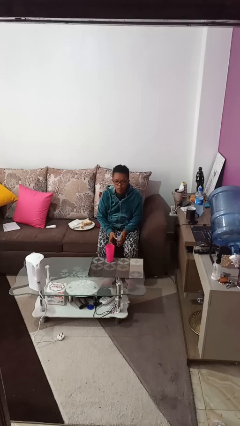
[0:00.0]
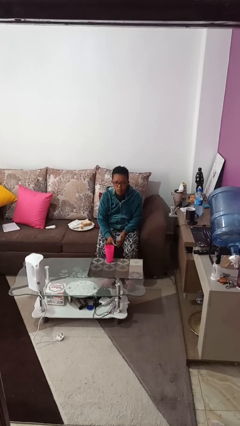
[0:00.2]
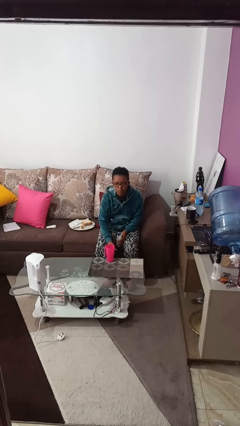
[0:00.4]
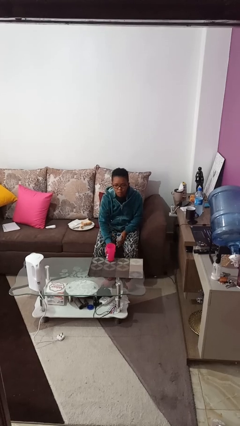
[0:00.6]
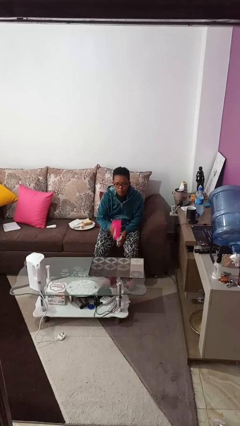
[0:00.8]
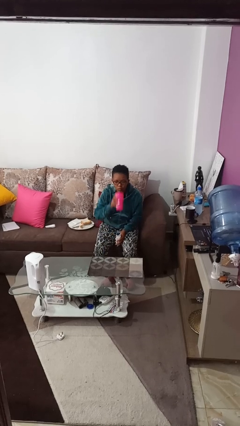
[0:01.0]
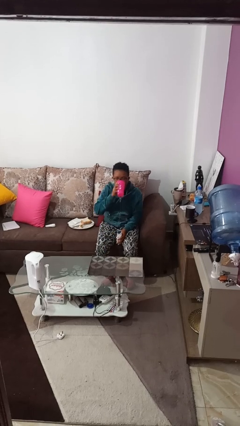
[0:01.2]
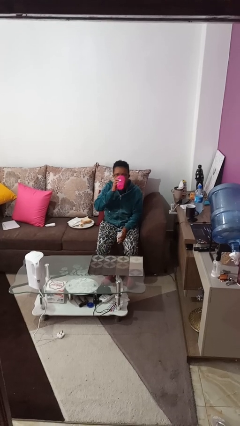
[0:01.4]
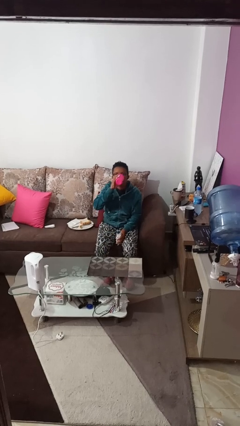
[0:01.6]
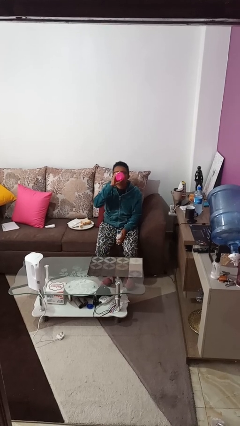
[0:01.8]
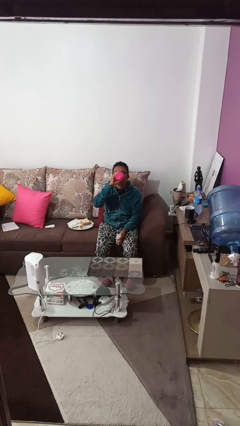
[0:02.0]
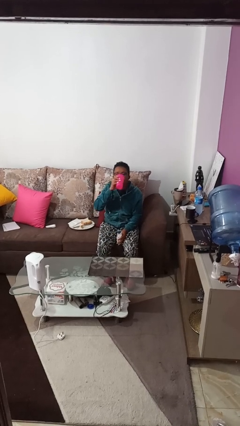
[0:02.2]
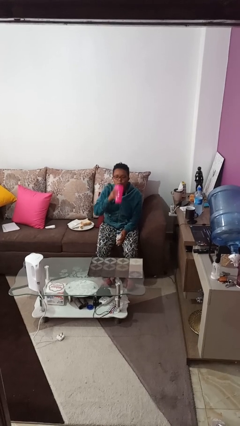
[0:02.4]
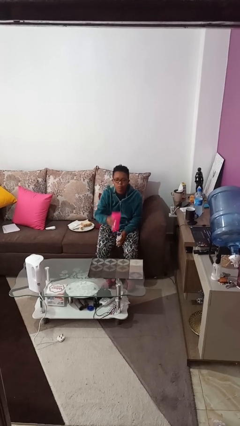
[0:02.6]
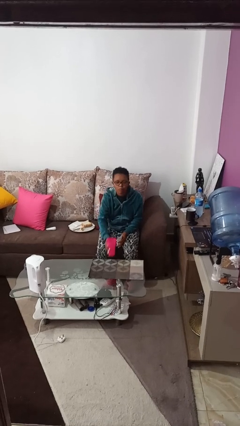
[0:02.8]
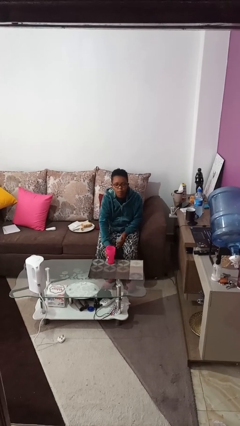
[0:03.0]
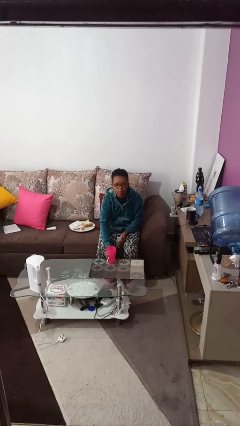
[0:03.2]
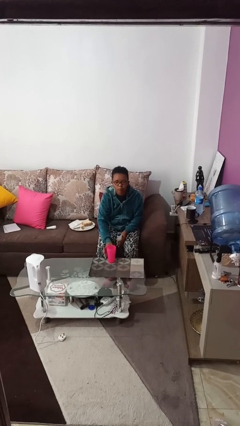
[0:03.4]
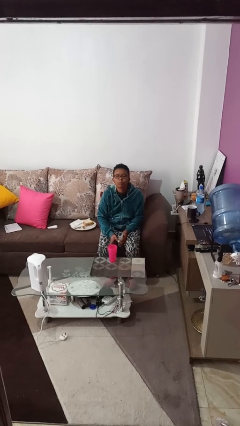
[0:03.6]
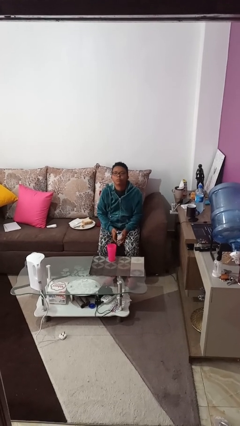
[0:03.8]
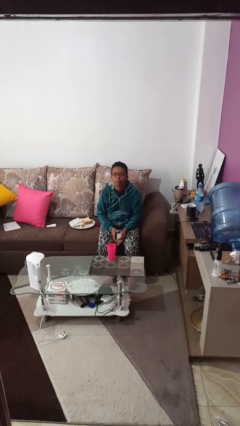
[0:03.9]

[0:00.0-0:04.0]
person drinks from cup

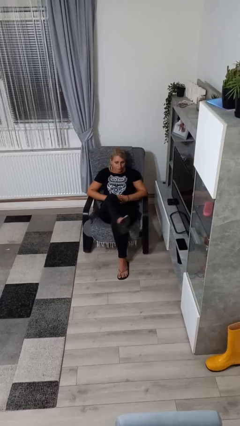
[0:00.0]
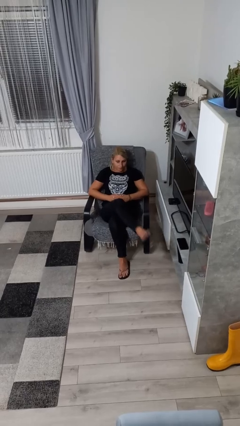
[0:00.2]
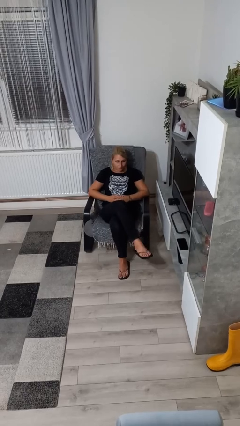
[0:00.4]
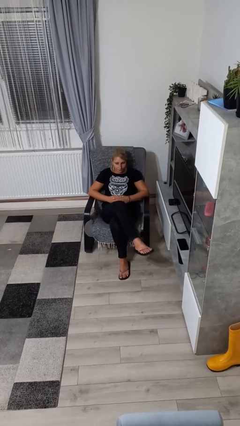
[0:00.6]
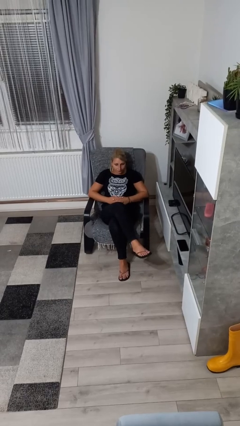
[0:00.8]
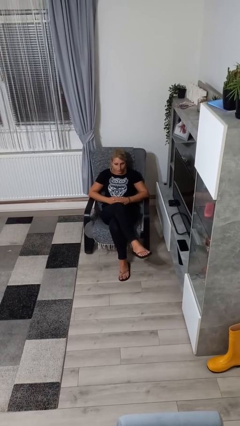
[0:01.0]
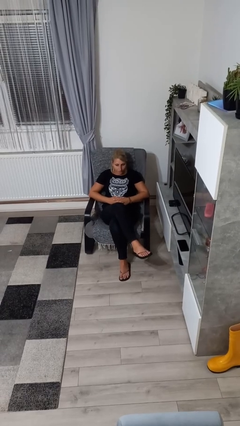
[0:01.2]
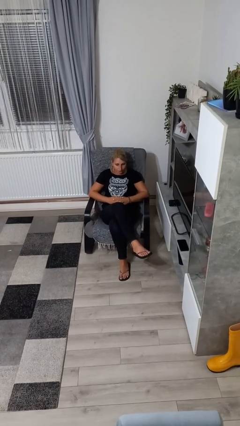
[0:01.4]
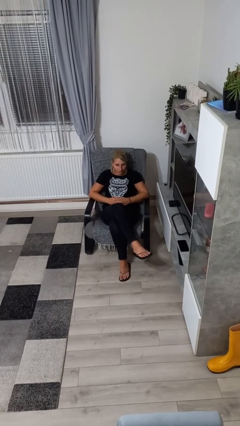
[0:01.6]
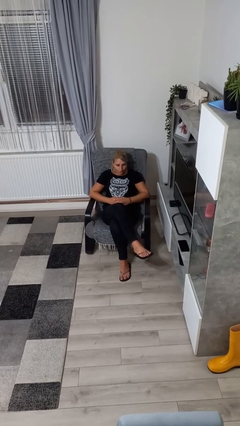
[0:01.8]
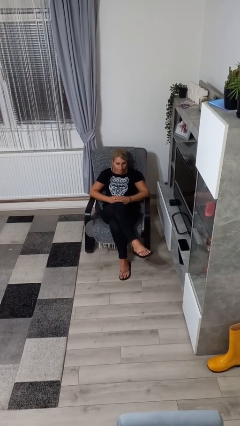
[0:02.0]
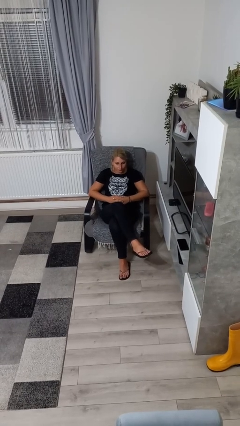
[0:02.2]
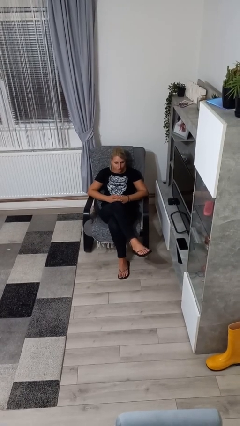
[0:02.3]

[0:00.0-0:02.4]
person crosses legs

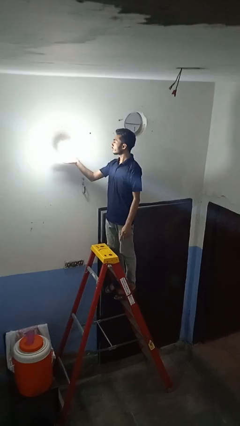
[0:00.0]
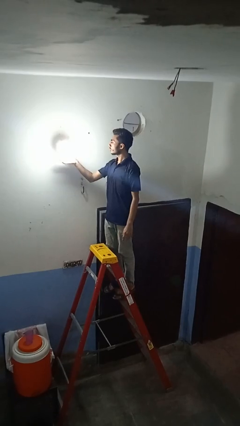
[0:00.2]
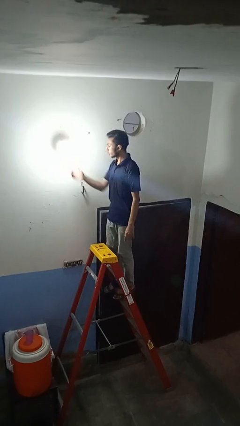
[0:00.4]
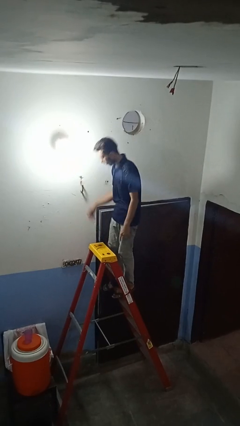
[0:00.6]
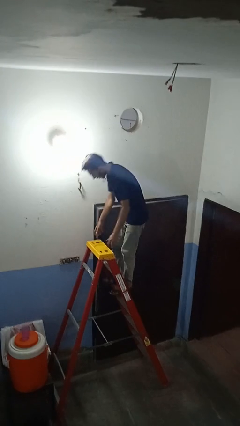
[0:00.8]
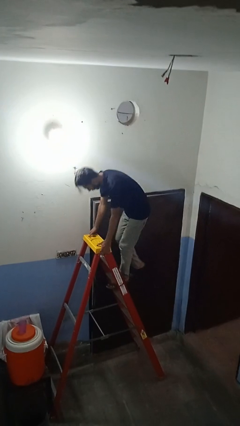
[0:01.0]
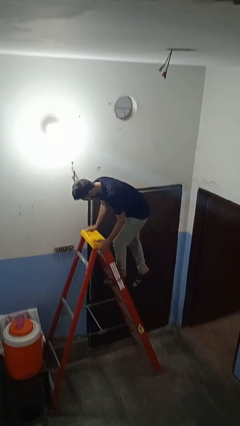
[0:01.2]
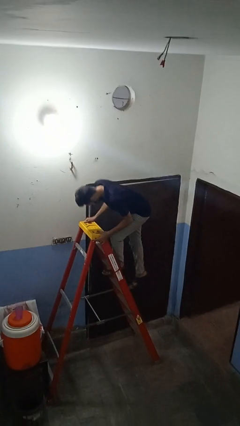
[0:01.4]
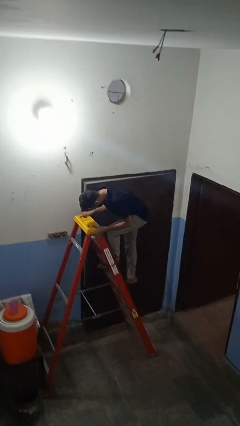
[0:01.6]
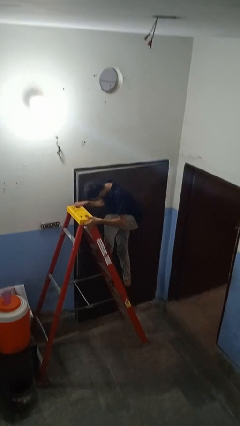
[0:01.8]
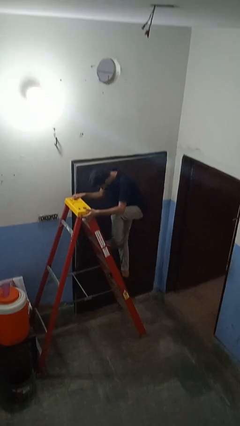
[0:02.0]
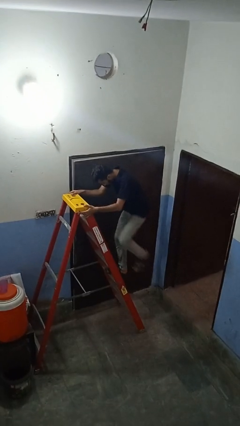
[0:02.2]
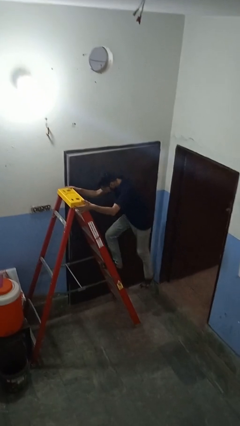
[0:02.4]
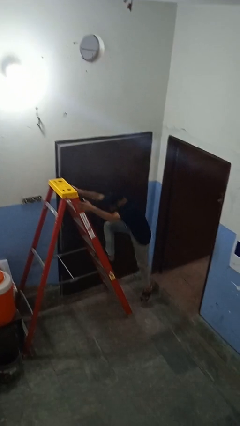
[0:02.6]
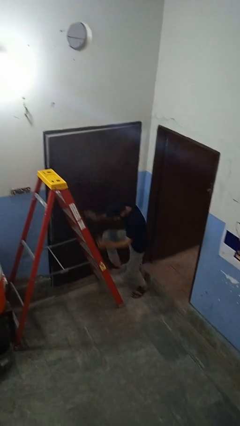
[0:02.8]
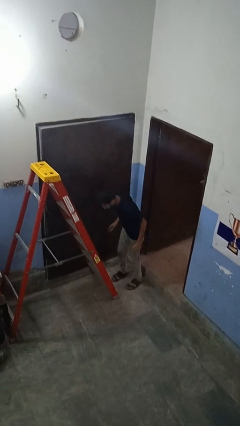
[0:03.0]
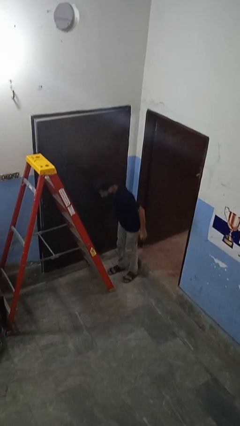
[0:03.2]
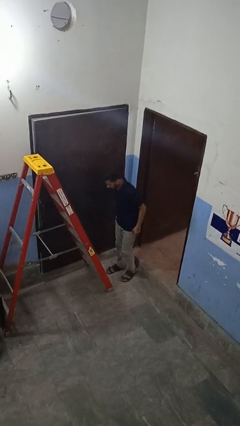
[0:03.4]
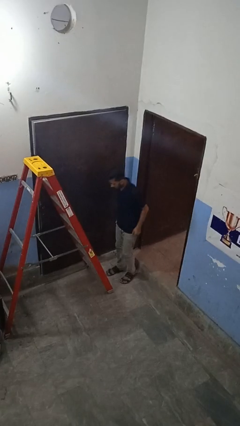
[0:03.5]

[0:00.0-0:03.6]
person climbs down ladder

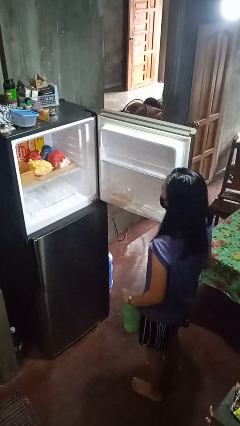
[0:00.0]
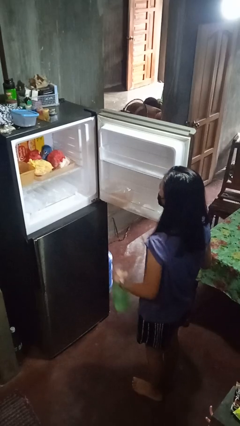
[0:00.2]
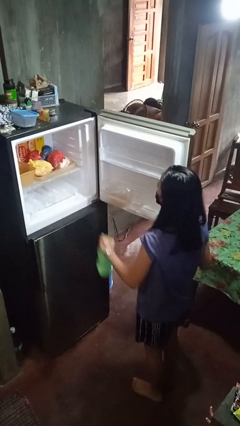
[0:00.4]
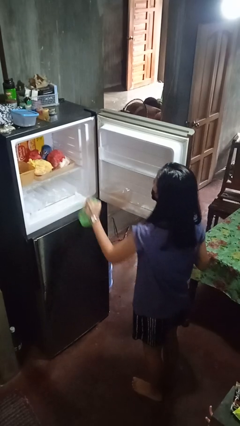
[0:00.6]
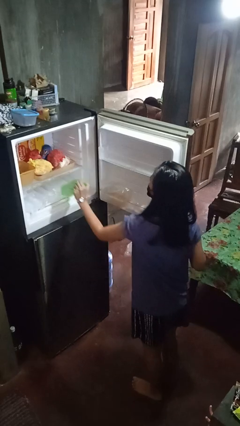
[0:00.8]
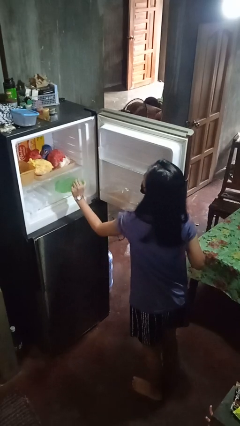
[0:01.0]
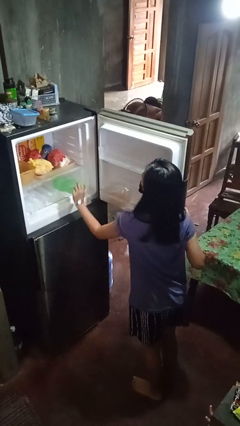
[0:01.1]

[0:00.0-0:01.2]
person puts object into refrigerator

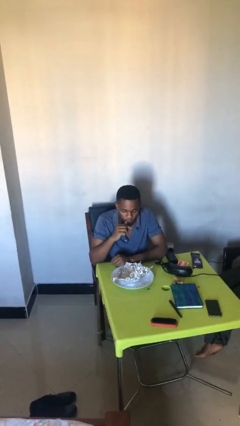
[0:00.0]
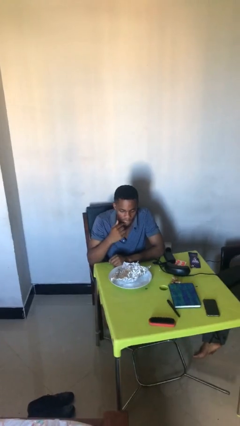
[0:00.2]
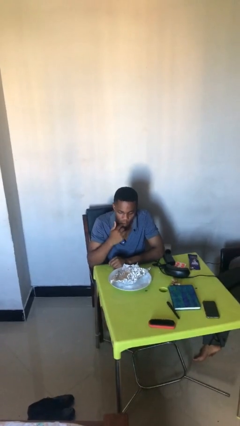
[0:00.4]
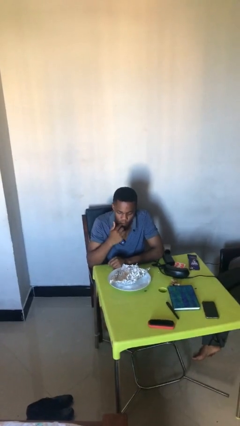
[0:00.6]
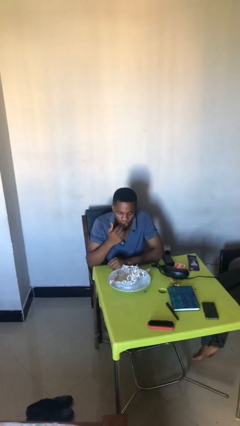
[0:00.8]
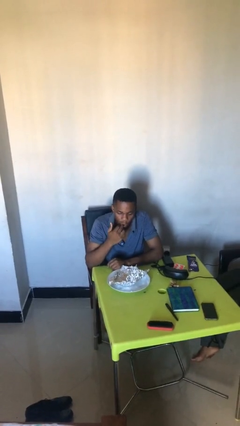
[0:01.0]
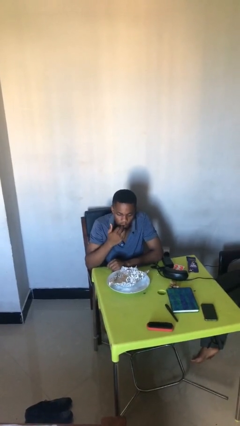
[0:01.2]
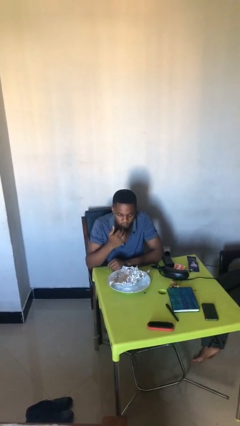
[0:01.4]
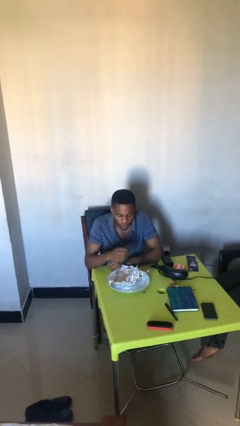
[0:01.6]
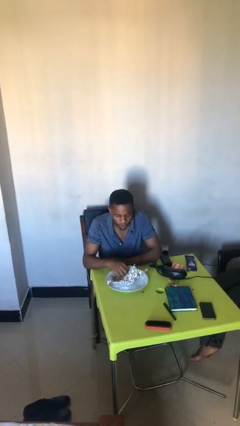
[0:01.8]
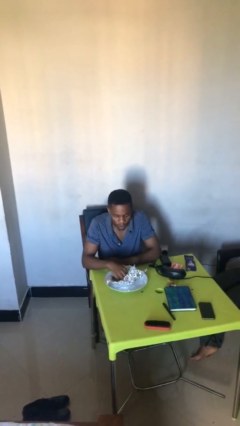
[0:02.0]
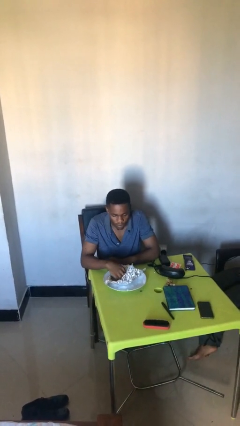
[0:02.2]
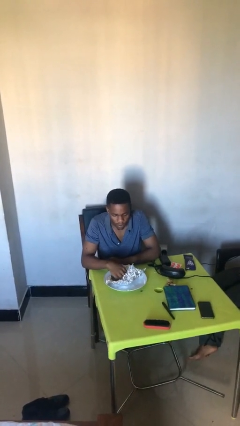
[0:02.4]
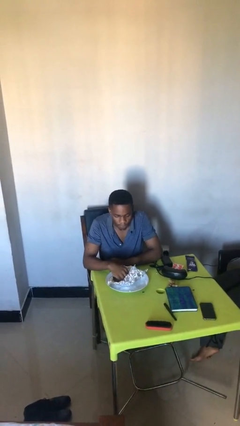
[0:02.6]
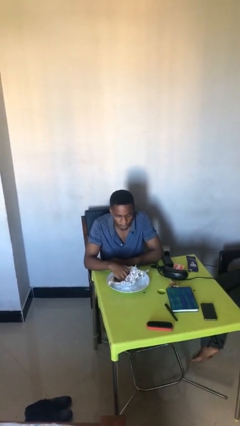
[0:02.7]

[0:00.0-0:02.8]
person licks fingers

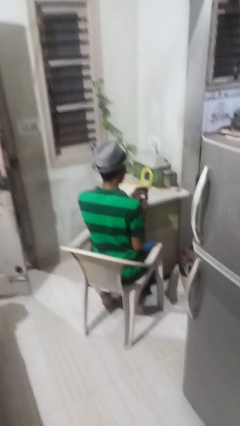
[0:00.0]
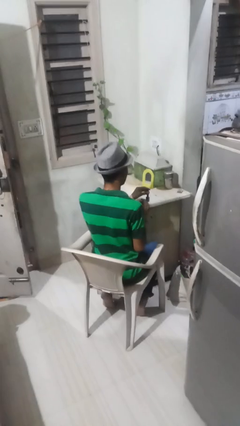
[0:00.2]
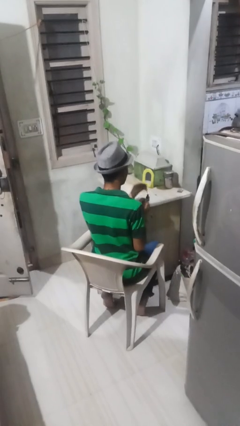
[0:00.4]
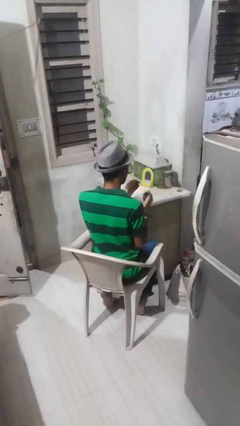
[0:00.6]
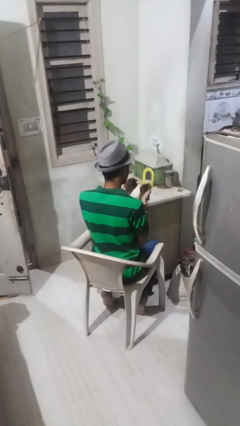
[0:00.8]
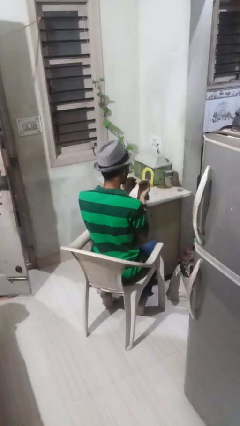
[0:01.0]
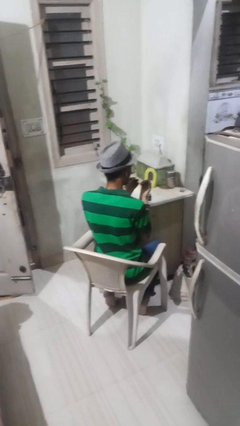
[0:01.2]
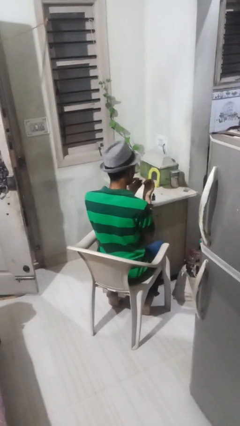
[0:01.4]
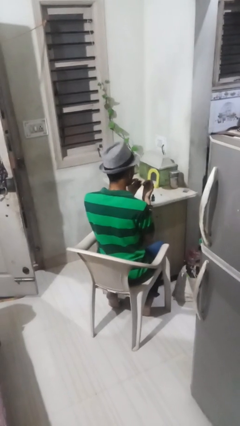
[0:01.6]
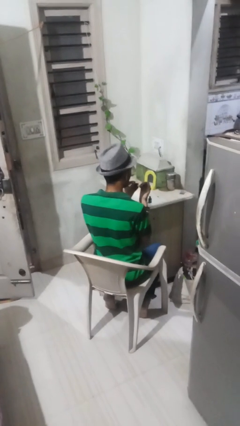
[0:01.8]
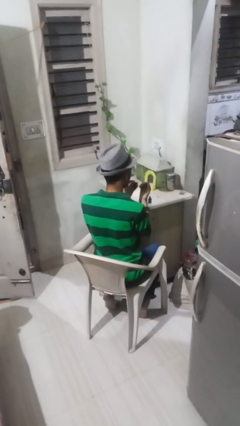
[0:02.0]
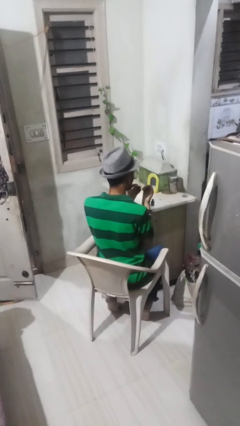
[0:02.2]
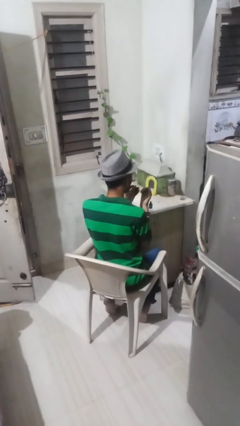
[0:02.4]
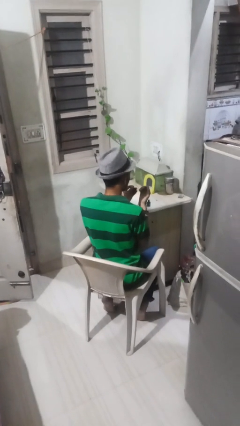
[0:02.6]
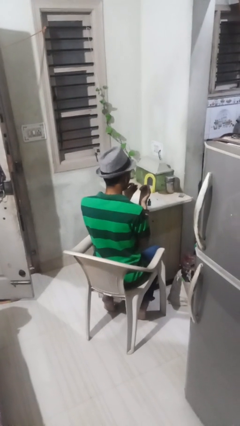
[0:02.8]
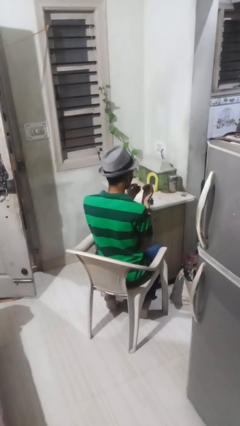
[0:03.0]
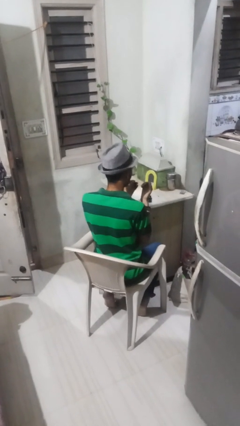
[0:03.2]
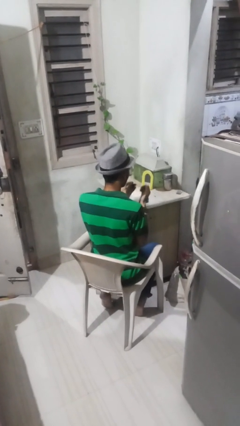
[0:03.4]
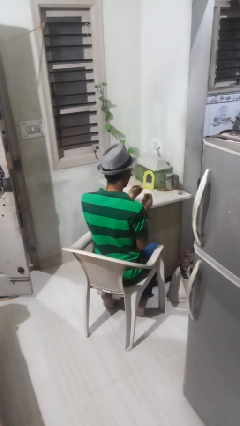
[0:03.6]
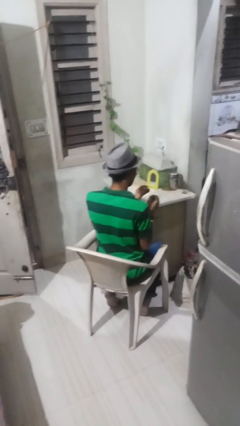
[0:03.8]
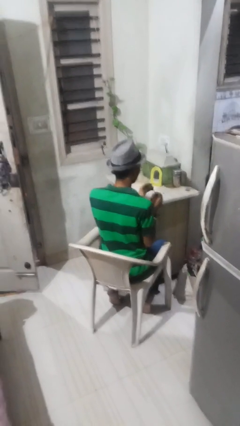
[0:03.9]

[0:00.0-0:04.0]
person paints fingernails
